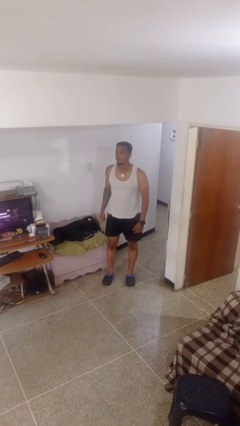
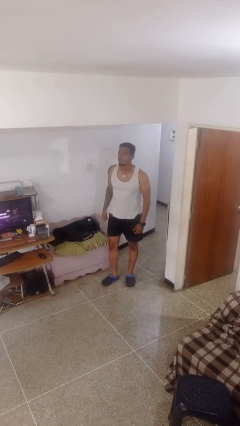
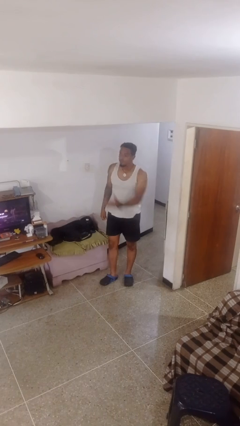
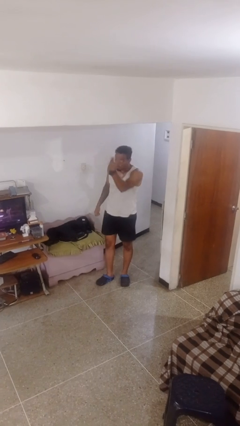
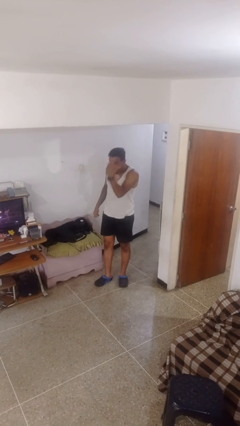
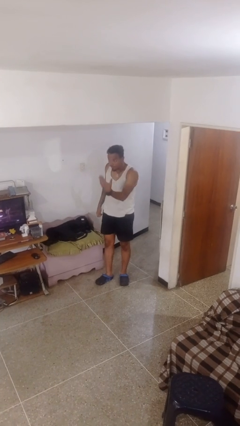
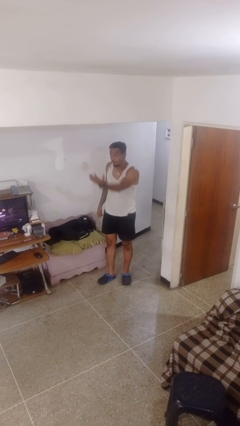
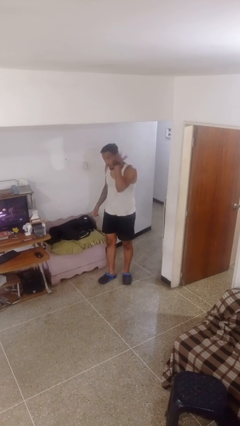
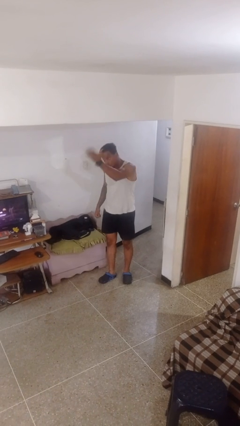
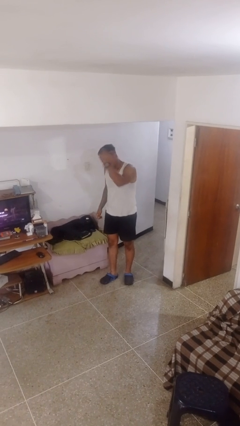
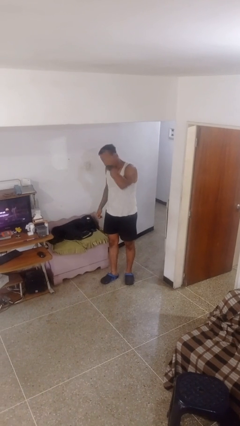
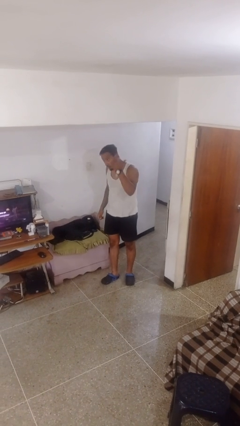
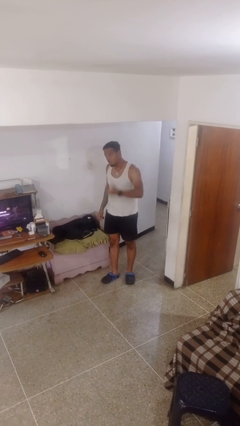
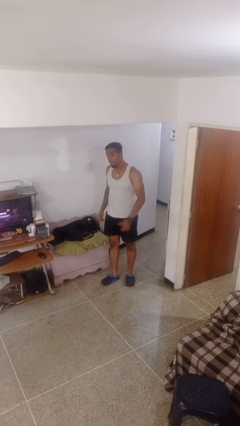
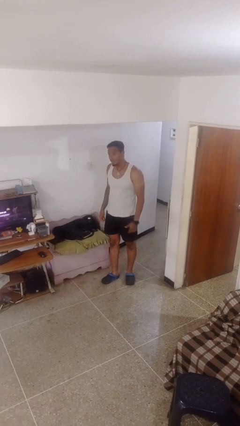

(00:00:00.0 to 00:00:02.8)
person gestures come here

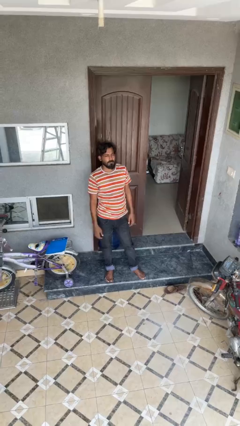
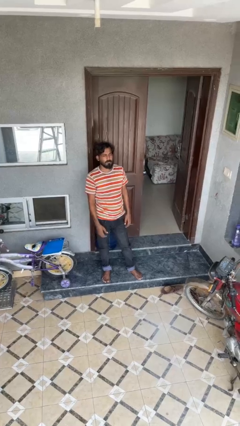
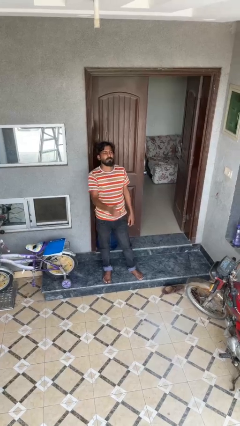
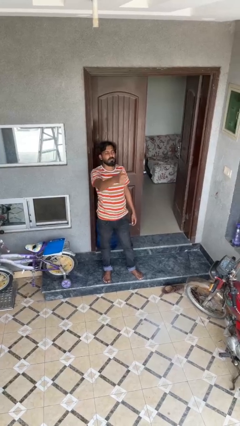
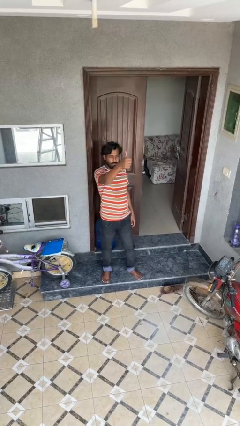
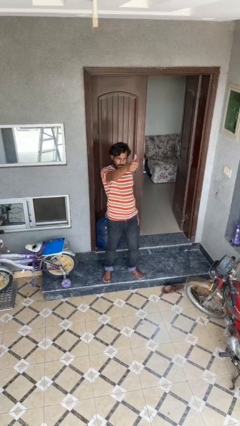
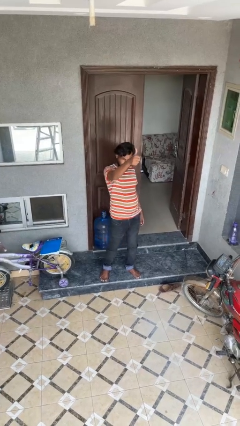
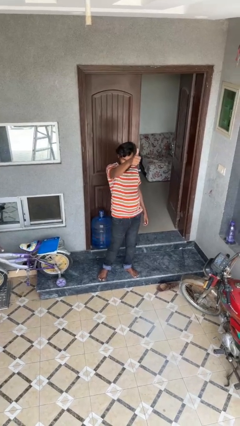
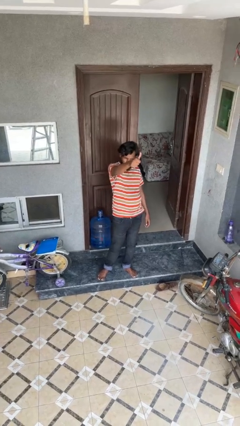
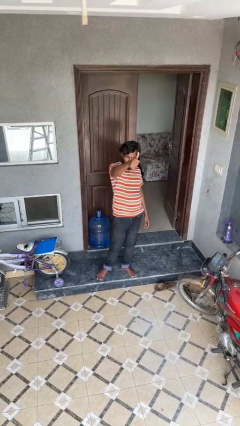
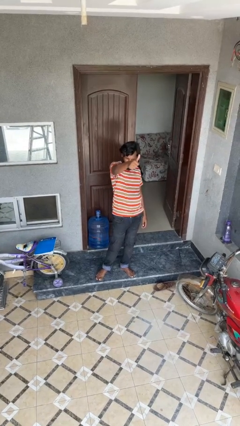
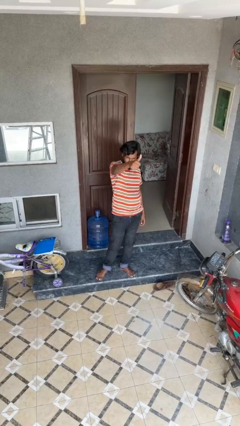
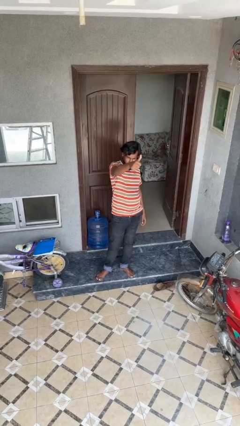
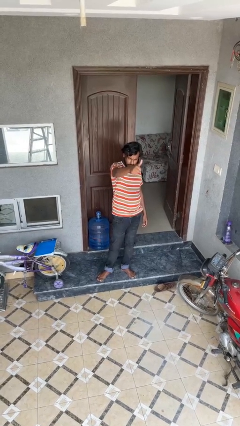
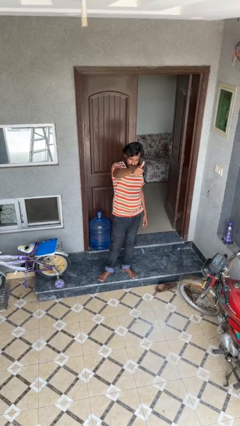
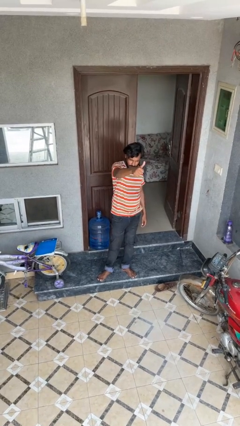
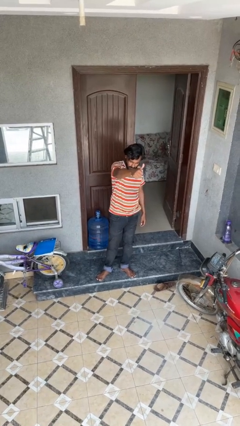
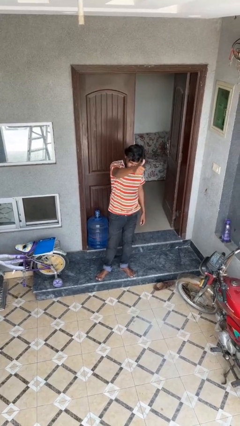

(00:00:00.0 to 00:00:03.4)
person gestures thumbs up

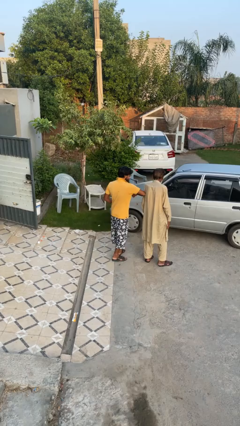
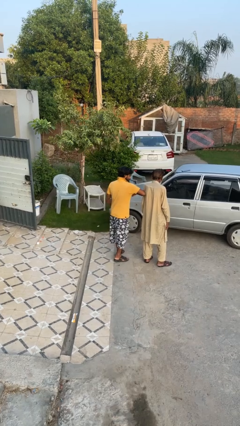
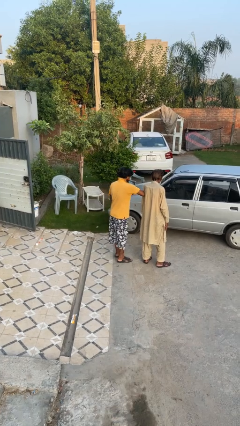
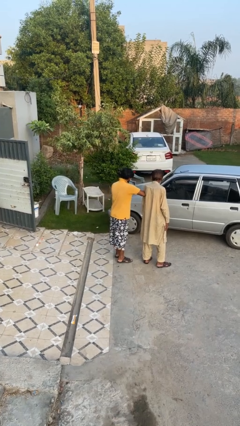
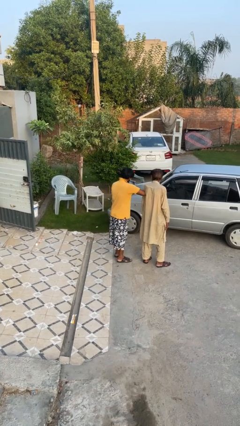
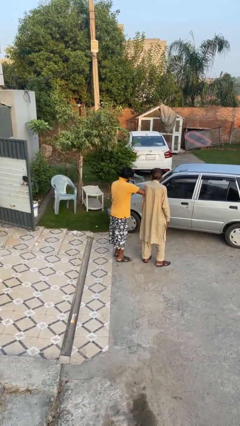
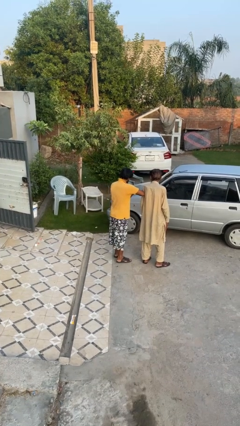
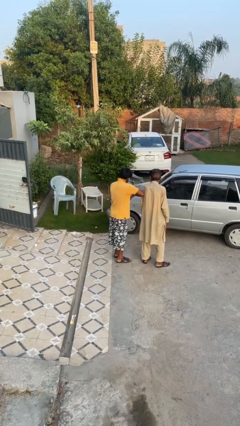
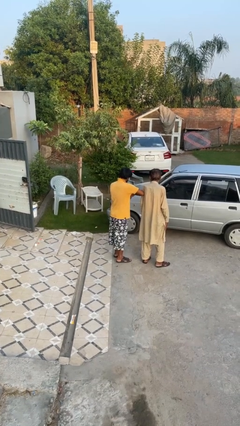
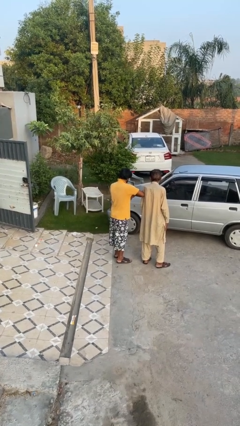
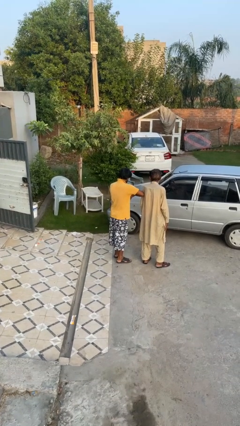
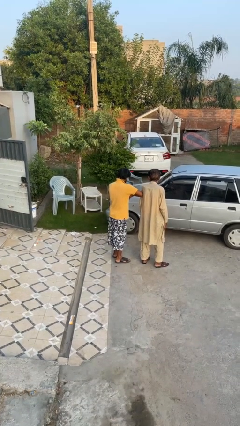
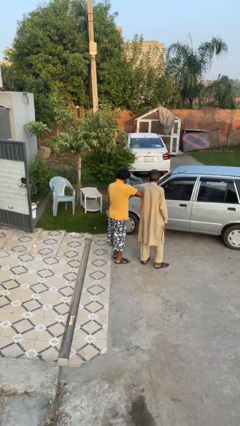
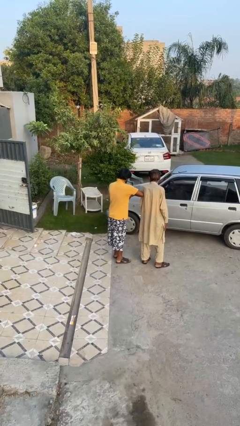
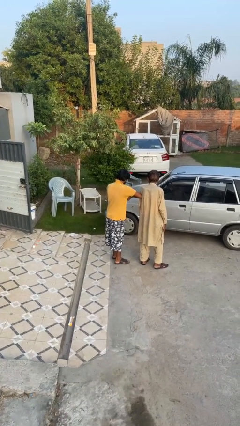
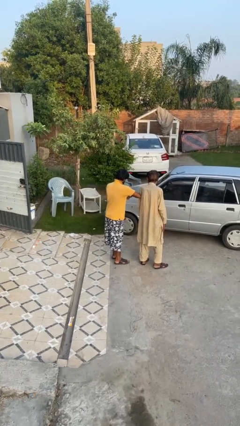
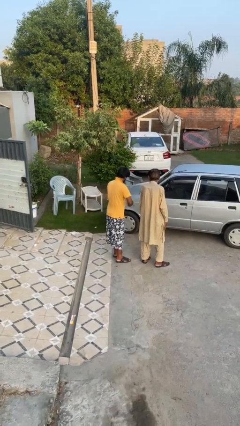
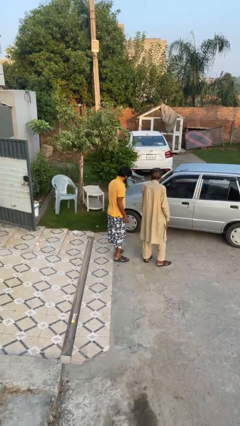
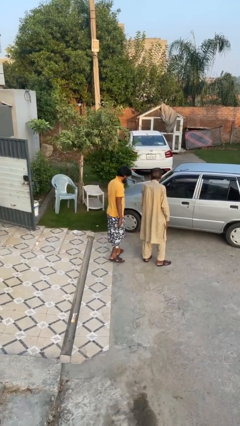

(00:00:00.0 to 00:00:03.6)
person nudges person with elbow

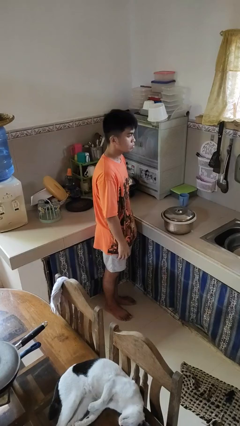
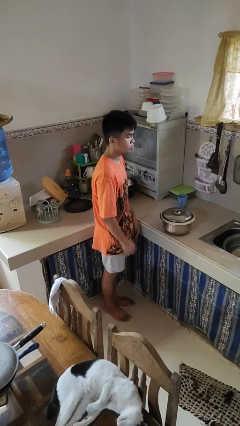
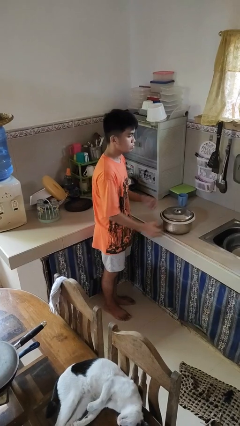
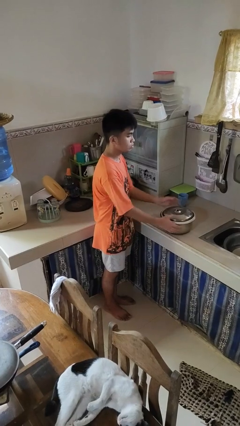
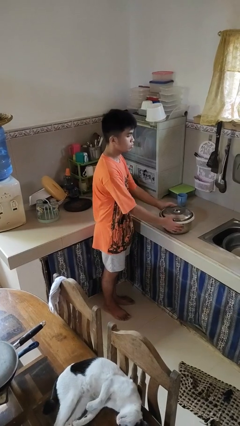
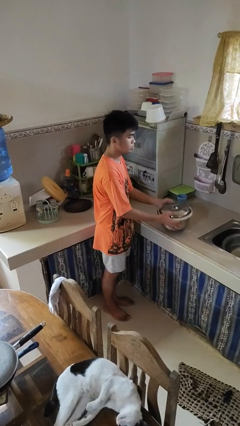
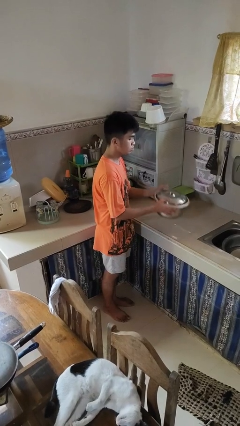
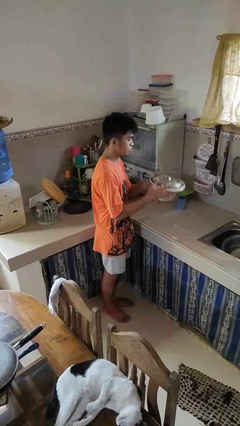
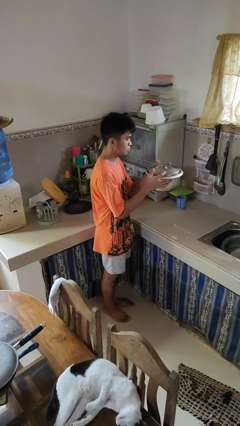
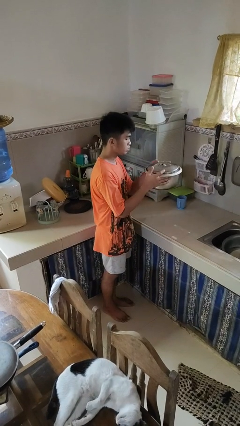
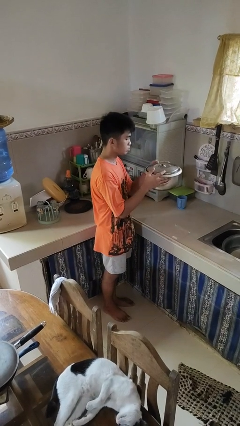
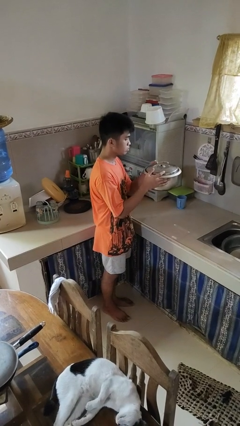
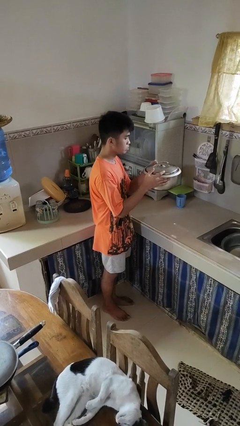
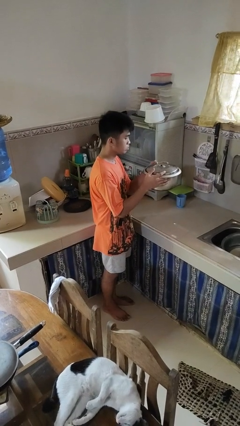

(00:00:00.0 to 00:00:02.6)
person picks up object from countertop

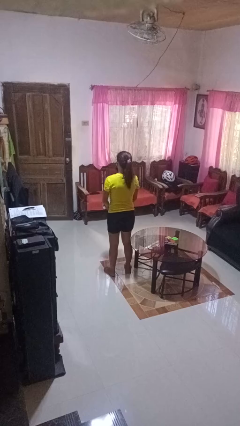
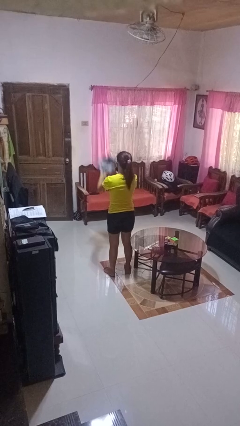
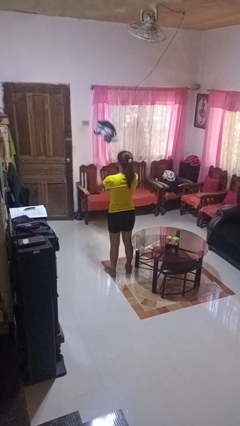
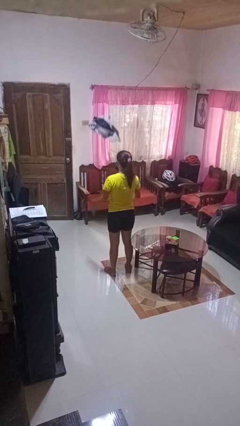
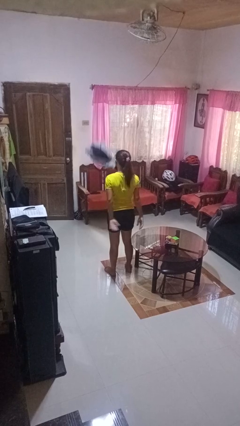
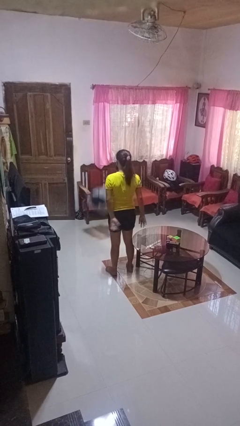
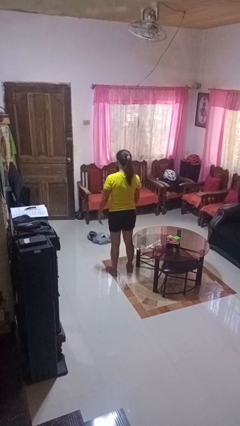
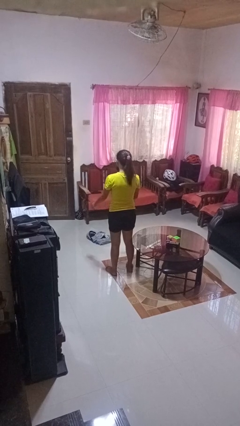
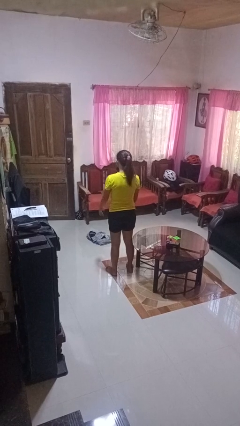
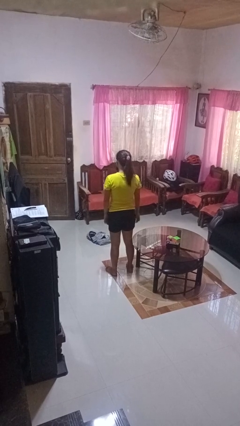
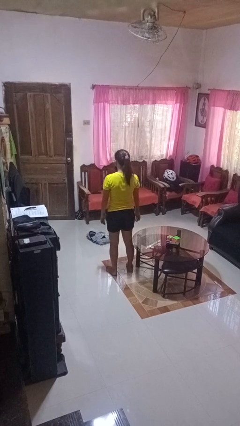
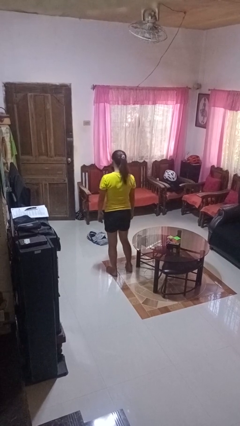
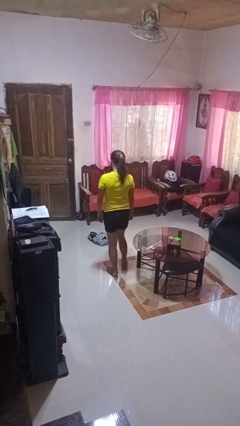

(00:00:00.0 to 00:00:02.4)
person throws object into air

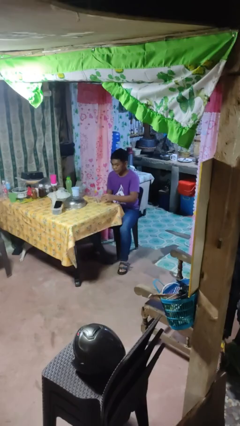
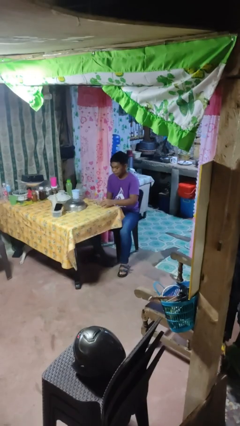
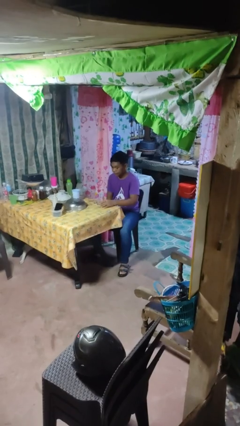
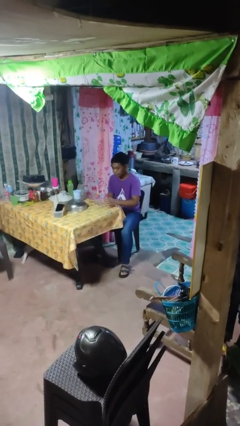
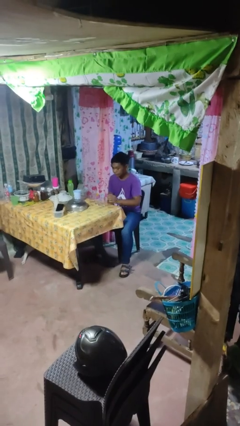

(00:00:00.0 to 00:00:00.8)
person puts down object on table

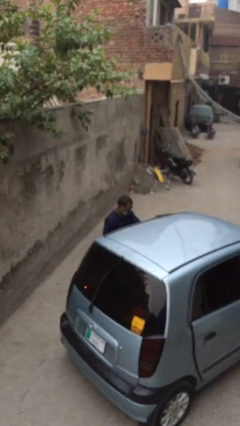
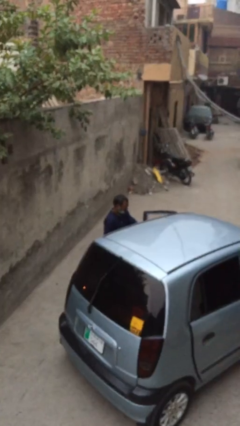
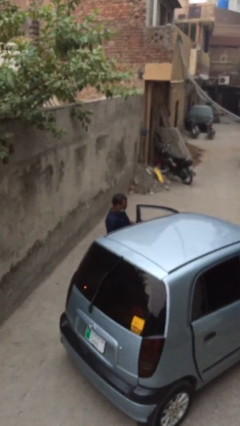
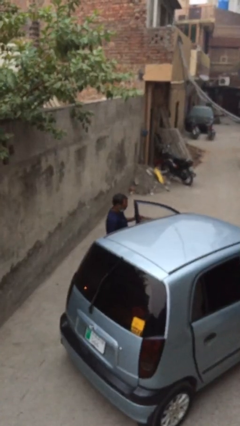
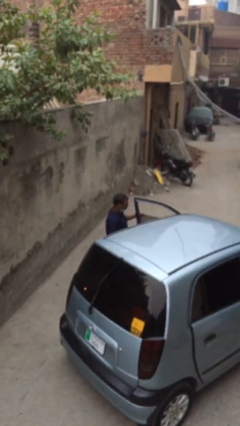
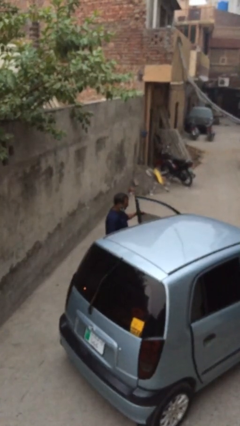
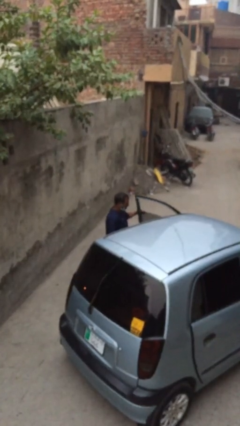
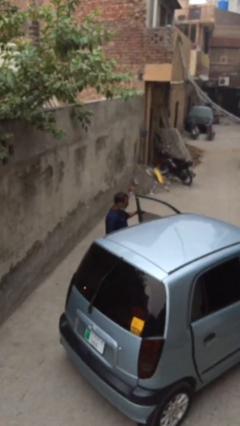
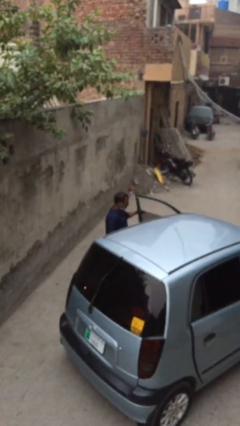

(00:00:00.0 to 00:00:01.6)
person opens car door
